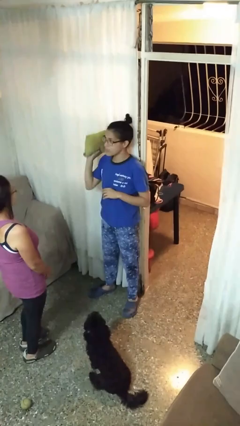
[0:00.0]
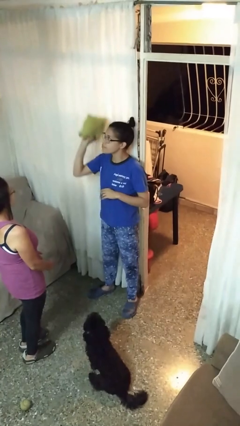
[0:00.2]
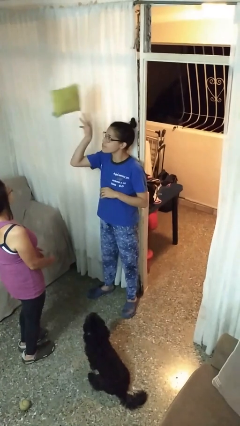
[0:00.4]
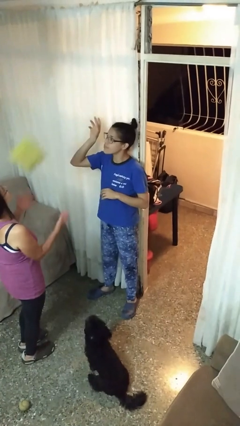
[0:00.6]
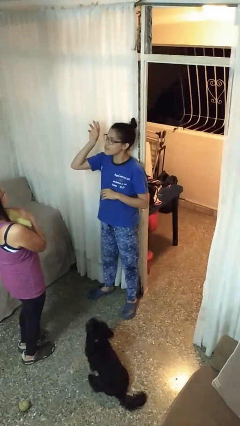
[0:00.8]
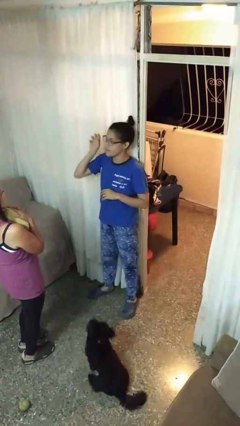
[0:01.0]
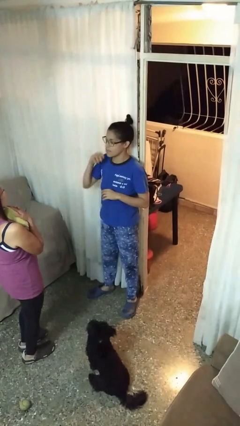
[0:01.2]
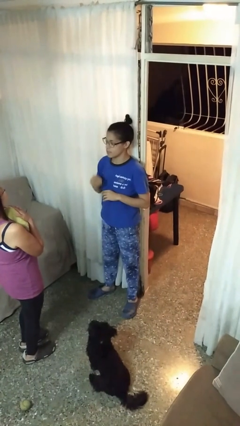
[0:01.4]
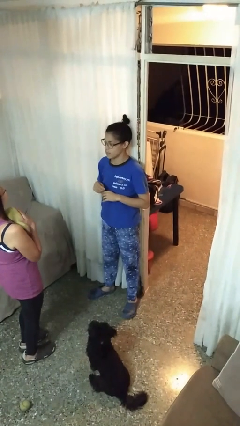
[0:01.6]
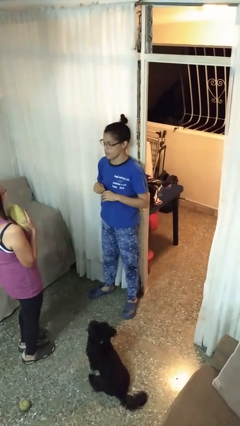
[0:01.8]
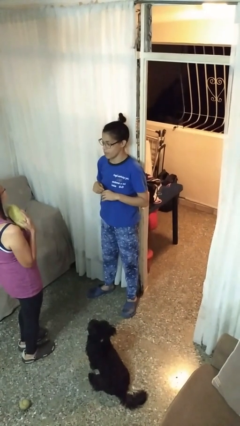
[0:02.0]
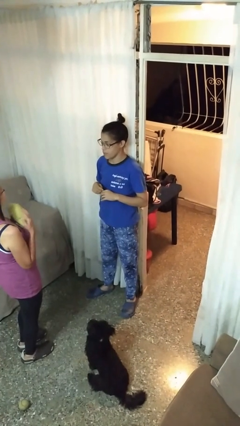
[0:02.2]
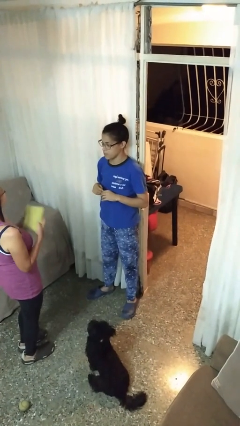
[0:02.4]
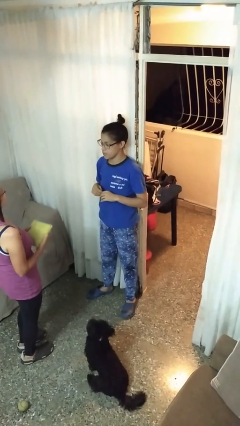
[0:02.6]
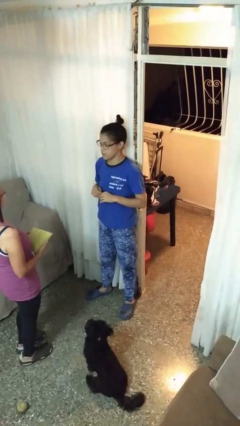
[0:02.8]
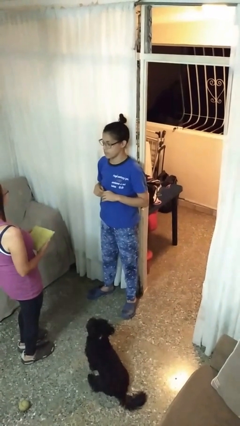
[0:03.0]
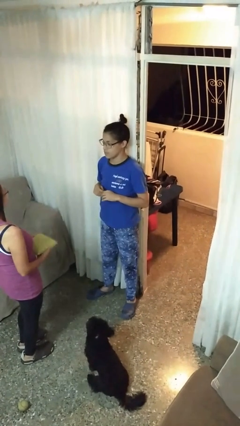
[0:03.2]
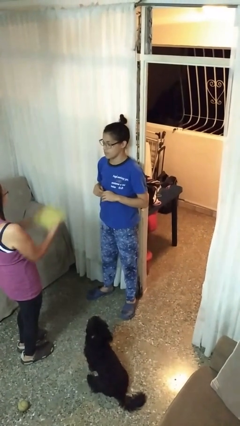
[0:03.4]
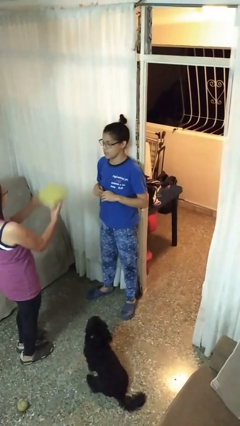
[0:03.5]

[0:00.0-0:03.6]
person throws object to person

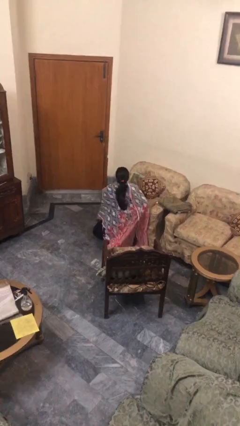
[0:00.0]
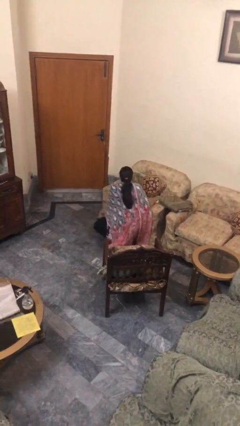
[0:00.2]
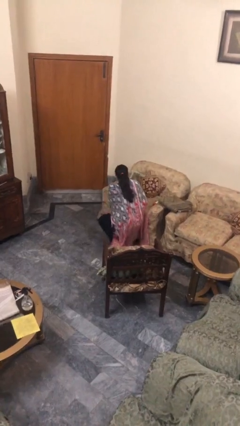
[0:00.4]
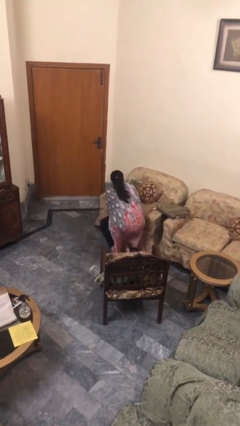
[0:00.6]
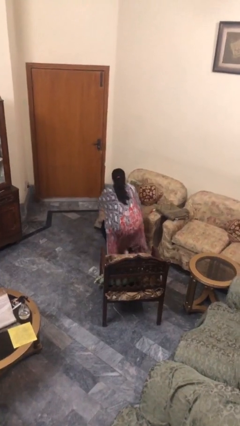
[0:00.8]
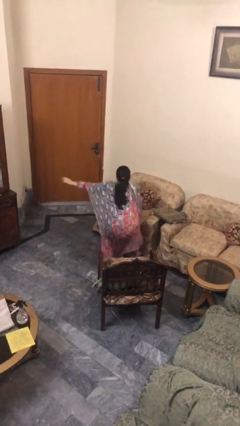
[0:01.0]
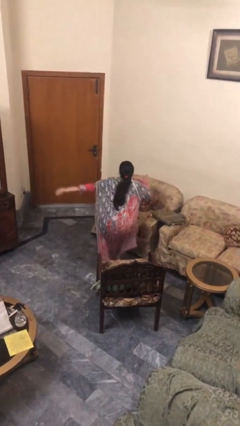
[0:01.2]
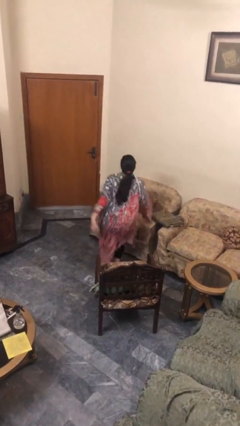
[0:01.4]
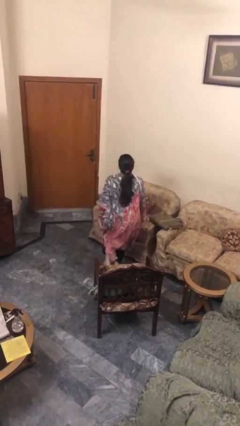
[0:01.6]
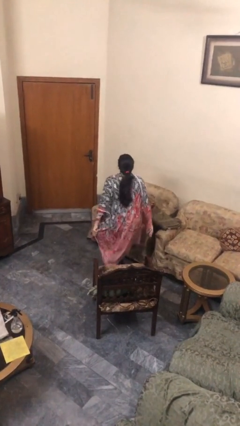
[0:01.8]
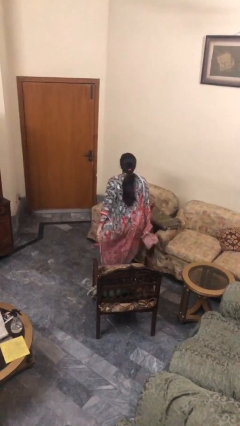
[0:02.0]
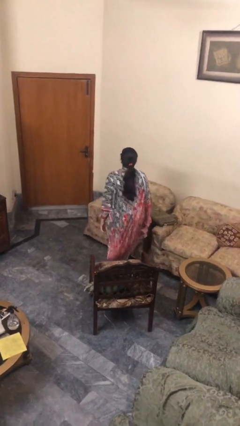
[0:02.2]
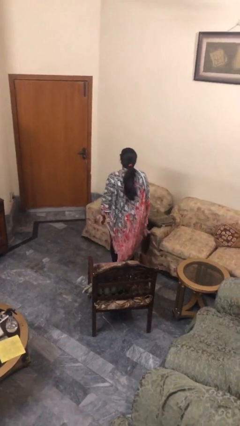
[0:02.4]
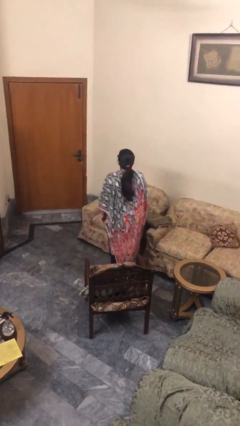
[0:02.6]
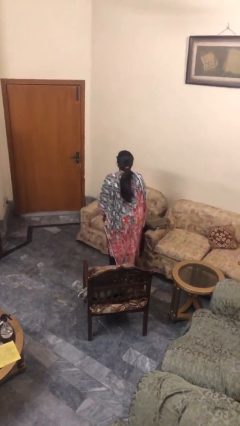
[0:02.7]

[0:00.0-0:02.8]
person stands up from floor

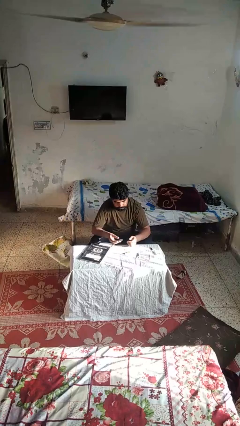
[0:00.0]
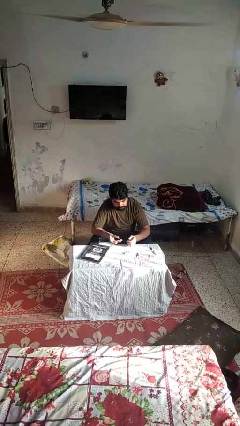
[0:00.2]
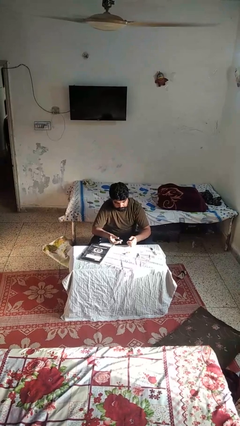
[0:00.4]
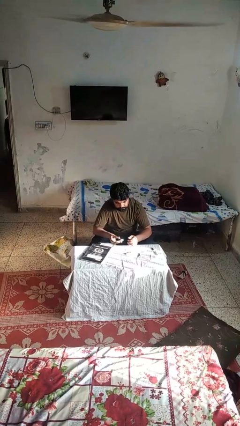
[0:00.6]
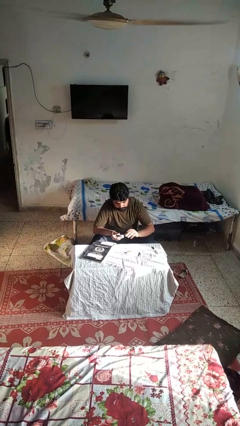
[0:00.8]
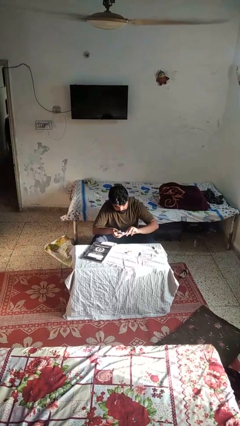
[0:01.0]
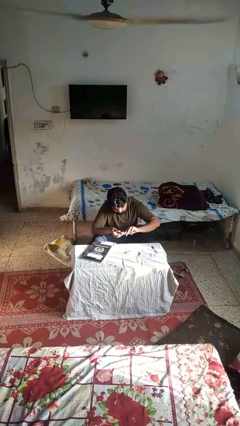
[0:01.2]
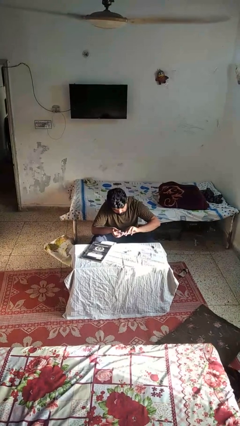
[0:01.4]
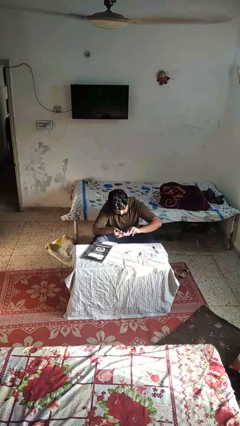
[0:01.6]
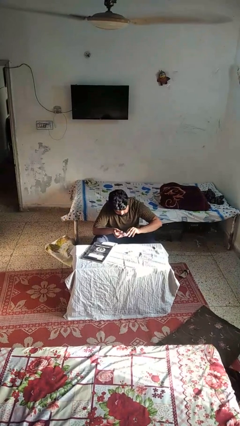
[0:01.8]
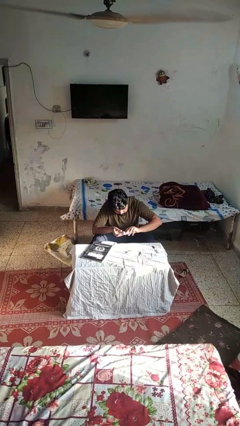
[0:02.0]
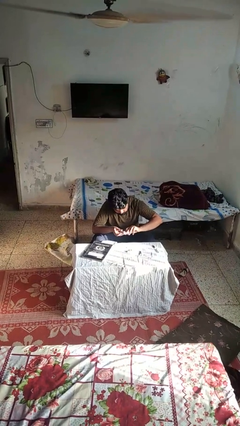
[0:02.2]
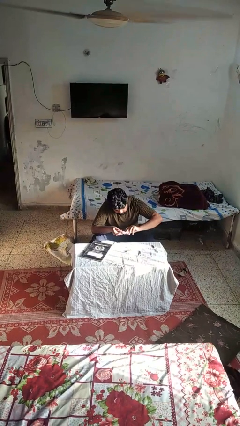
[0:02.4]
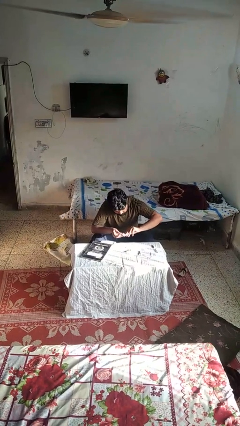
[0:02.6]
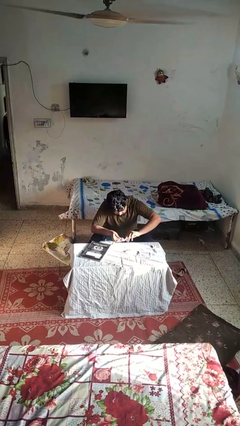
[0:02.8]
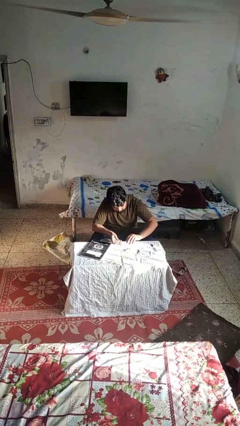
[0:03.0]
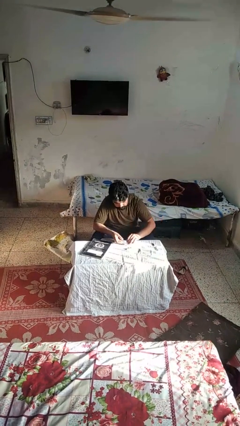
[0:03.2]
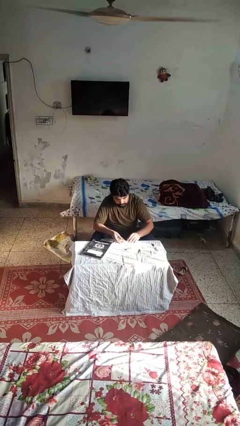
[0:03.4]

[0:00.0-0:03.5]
person clips fingernails

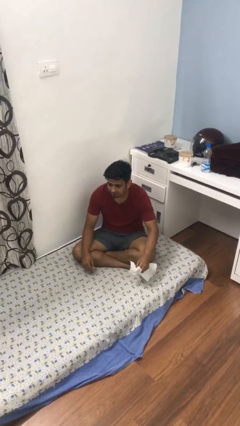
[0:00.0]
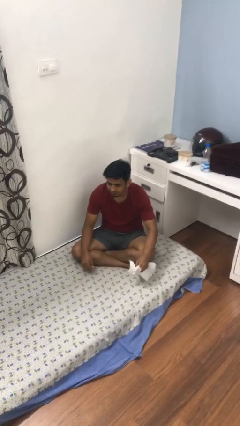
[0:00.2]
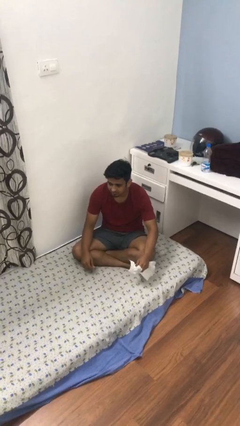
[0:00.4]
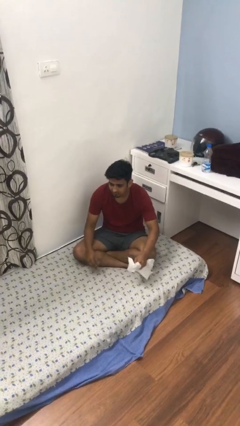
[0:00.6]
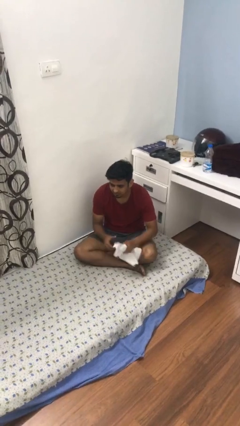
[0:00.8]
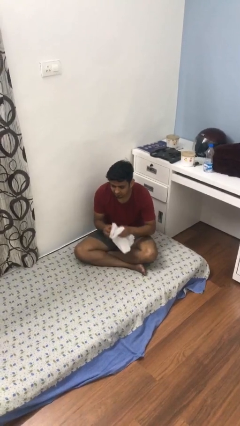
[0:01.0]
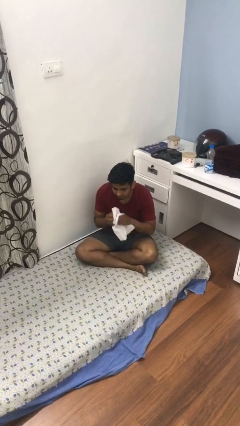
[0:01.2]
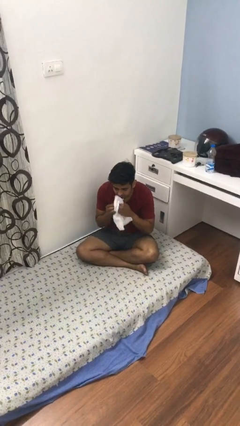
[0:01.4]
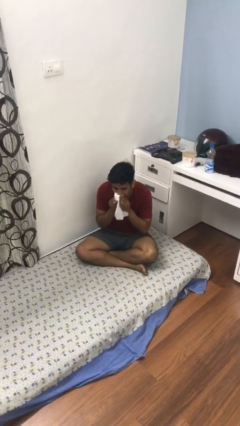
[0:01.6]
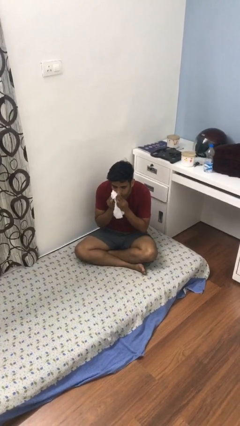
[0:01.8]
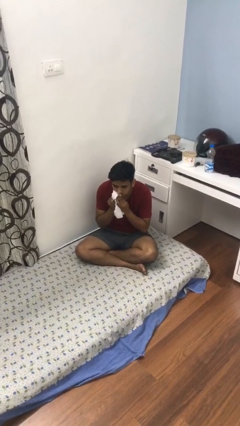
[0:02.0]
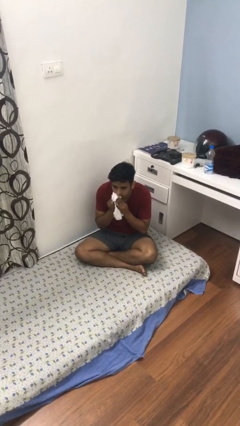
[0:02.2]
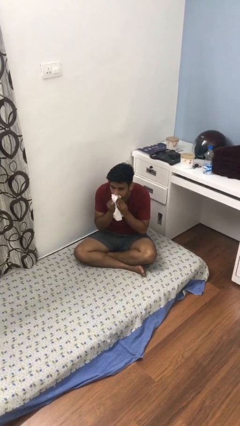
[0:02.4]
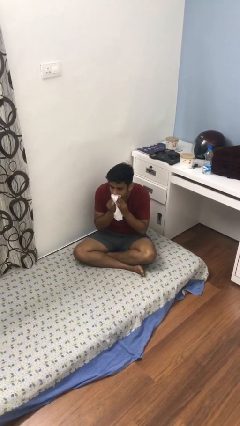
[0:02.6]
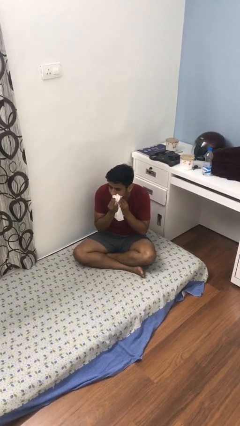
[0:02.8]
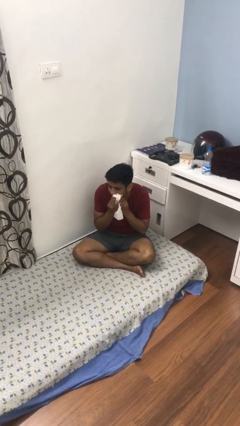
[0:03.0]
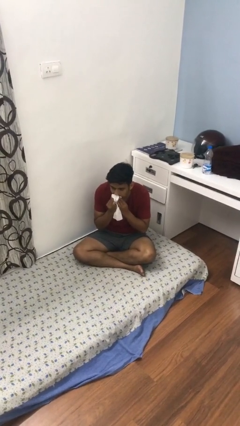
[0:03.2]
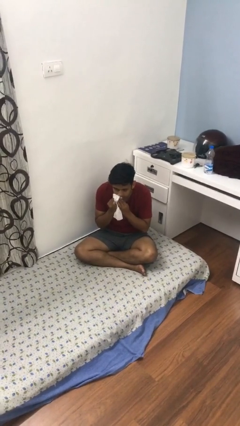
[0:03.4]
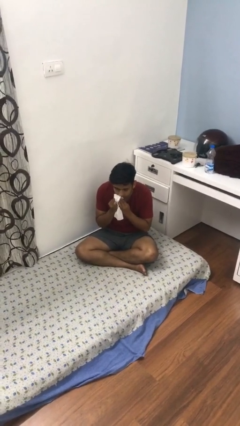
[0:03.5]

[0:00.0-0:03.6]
person wipes mouth with napkin

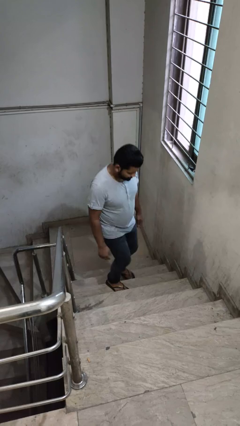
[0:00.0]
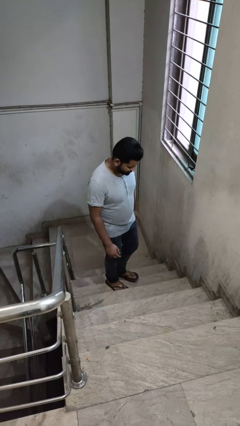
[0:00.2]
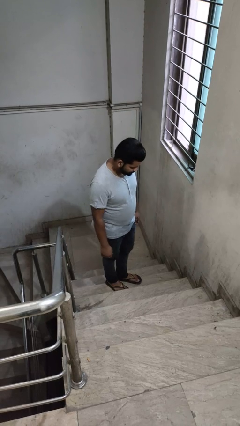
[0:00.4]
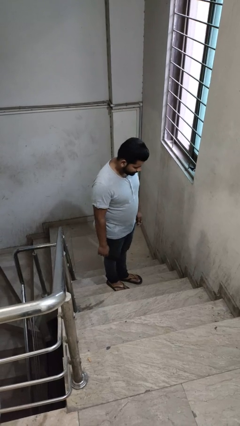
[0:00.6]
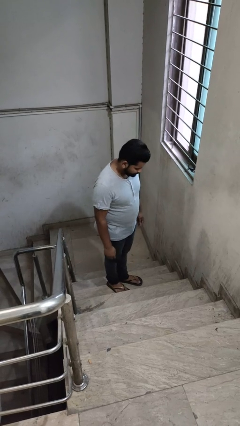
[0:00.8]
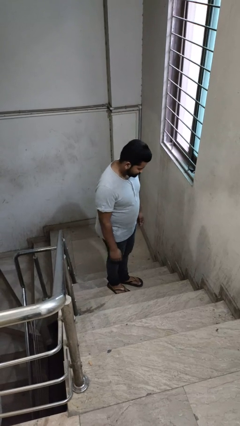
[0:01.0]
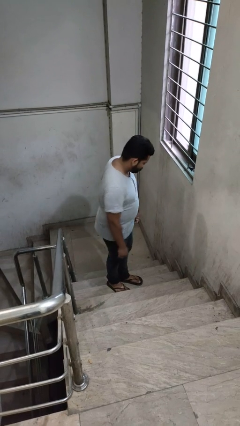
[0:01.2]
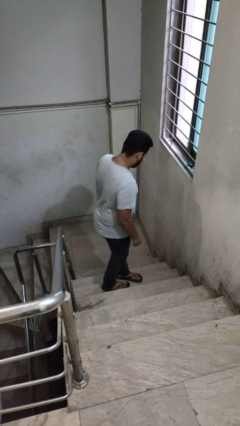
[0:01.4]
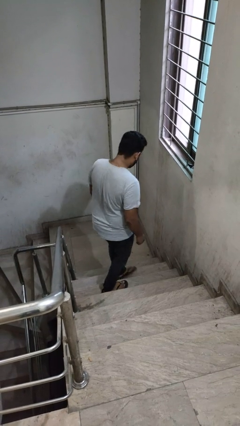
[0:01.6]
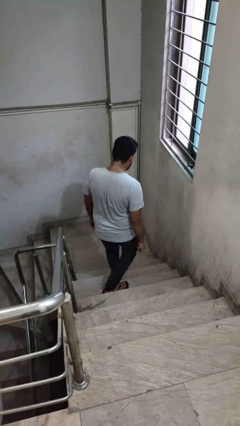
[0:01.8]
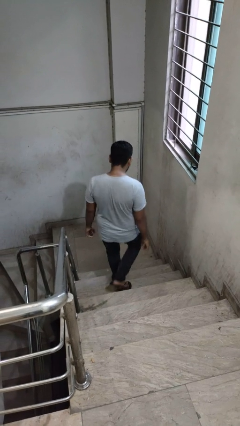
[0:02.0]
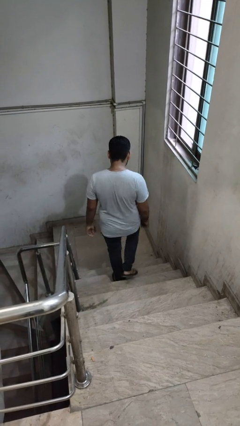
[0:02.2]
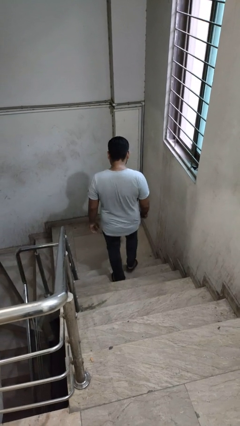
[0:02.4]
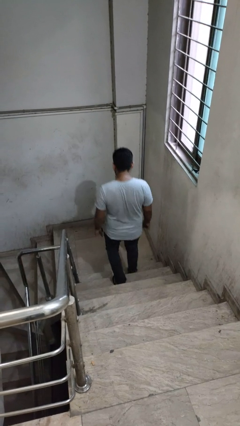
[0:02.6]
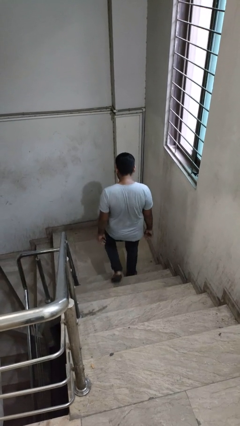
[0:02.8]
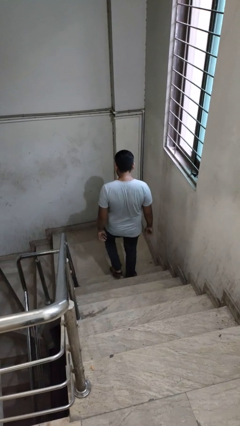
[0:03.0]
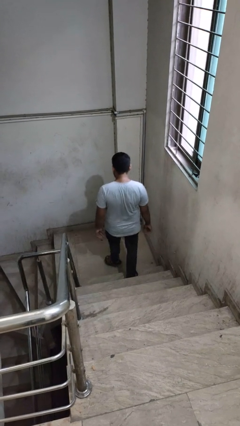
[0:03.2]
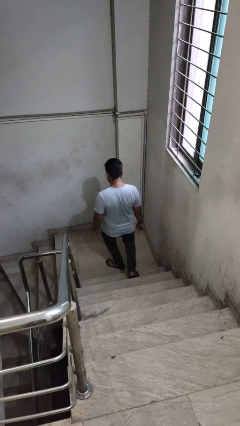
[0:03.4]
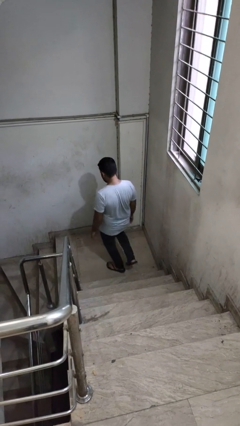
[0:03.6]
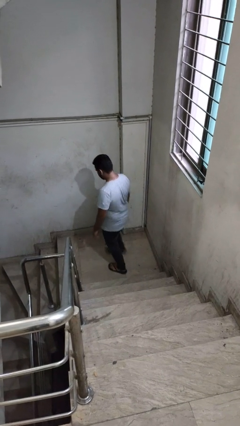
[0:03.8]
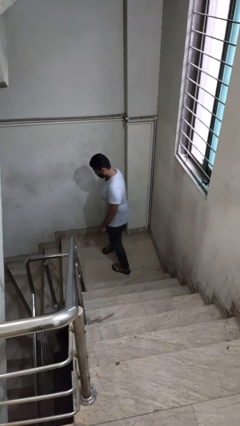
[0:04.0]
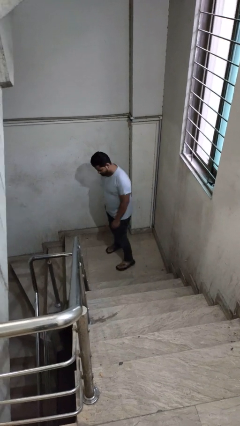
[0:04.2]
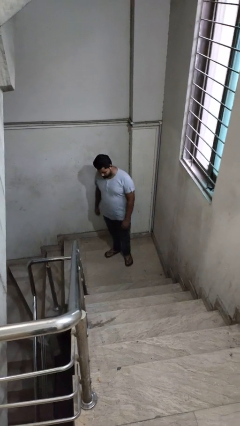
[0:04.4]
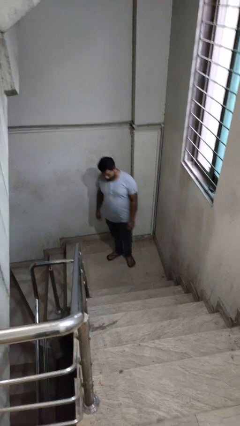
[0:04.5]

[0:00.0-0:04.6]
person climbs down stairs
